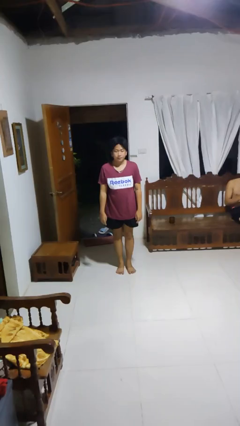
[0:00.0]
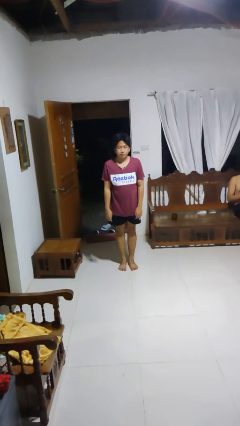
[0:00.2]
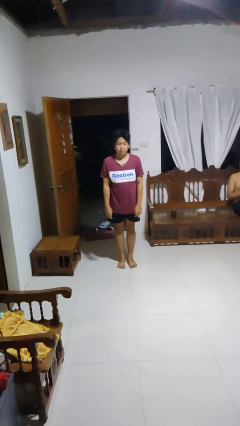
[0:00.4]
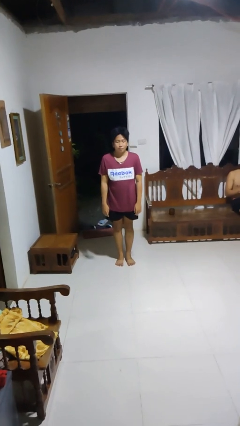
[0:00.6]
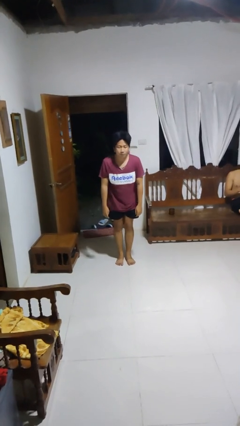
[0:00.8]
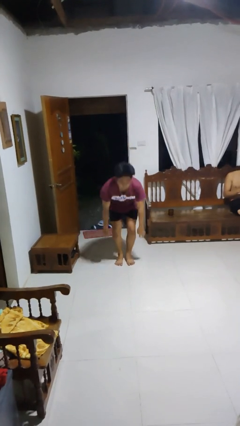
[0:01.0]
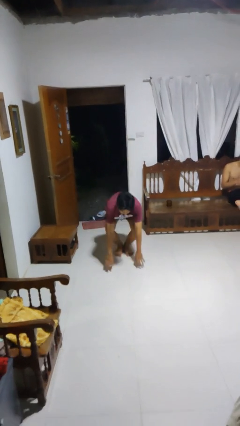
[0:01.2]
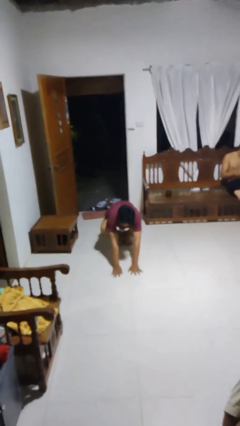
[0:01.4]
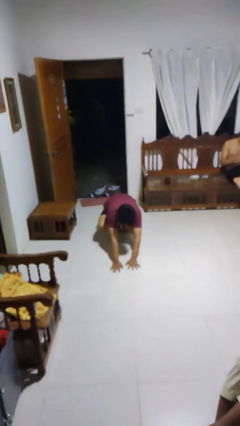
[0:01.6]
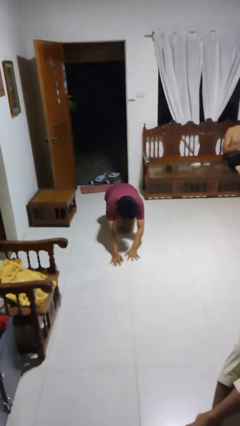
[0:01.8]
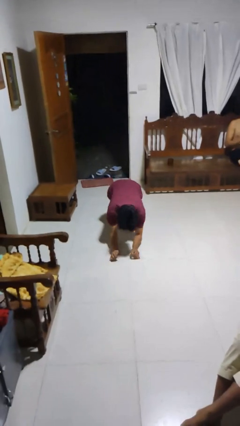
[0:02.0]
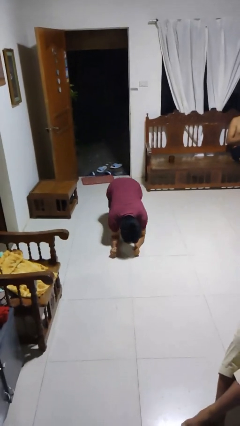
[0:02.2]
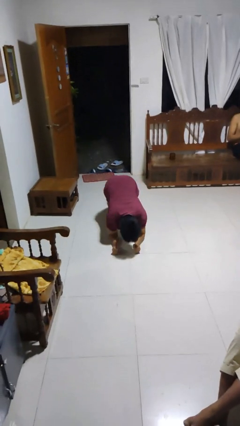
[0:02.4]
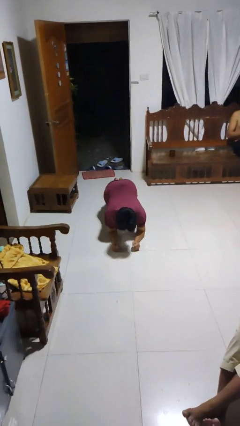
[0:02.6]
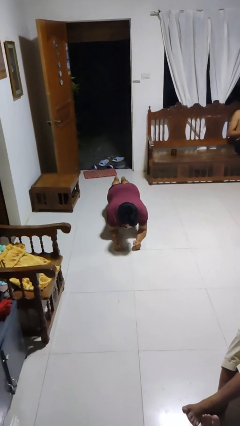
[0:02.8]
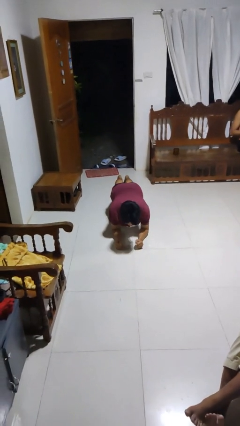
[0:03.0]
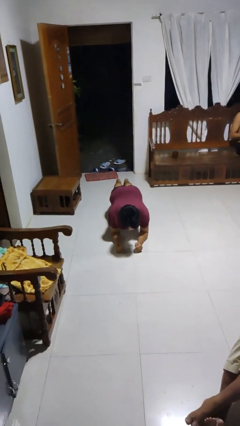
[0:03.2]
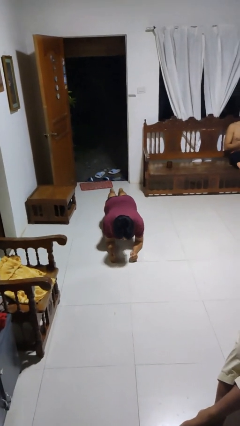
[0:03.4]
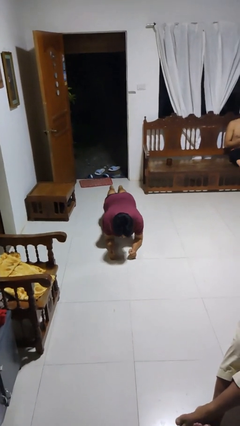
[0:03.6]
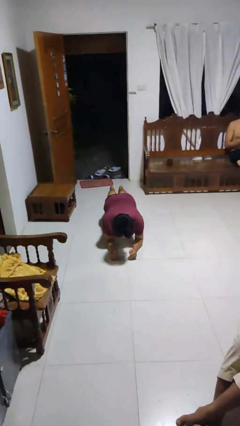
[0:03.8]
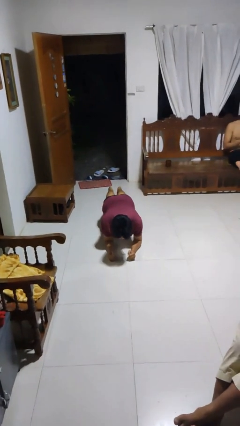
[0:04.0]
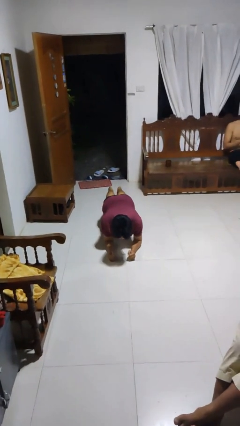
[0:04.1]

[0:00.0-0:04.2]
person exercises with plank

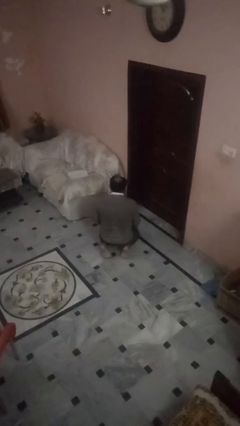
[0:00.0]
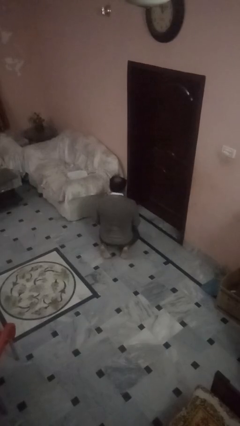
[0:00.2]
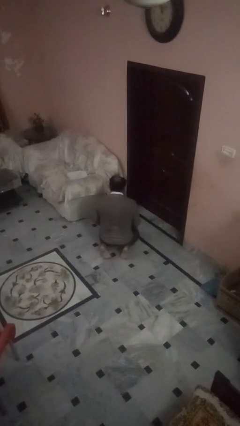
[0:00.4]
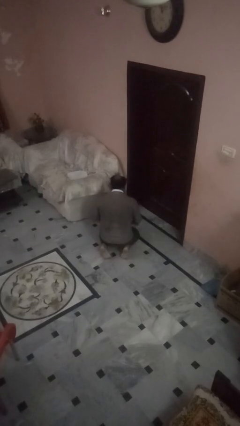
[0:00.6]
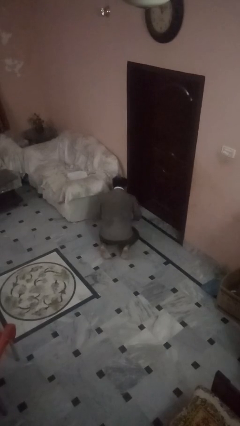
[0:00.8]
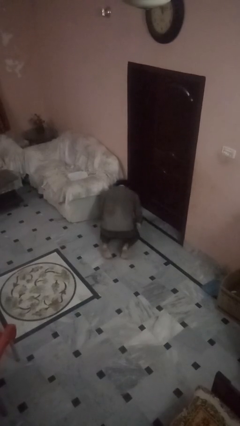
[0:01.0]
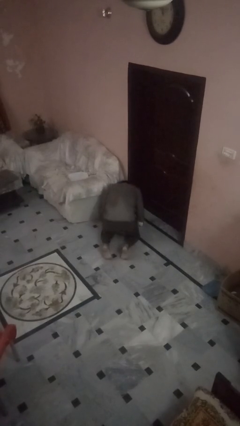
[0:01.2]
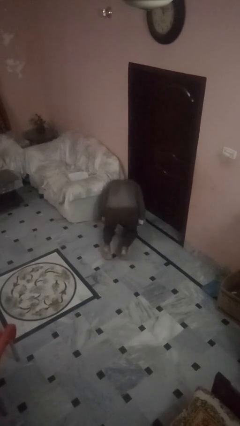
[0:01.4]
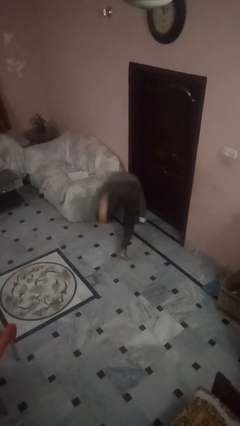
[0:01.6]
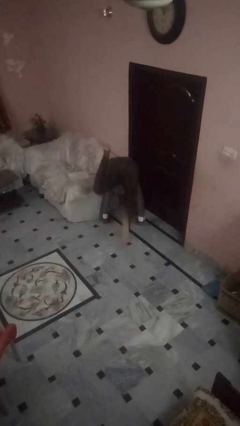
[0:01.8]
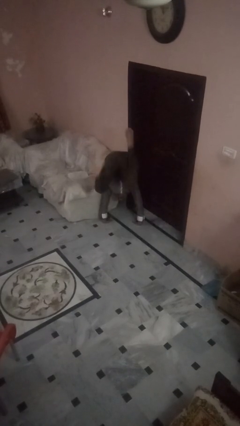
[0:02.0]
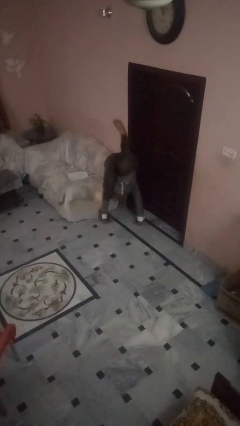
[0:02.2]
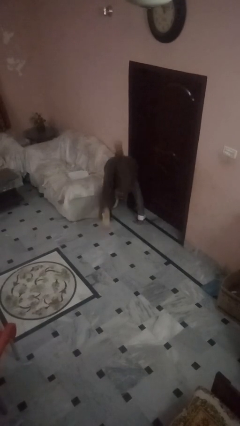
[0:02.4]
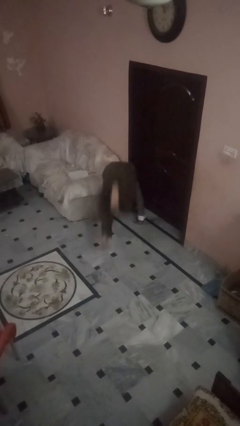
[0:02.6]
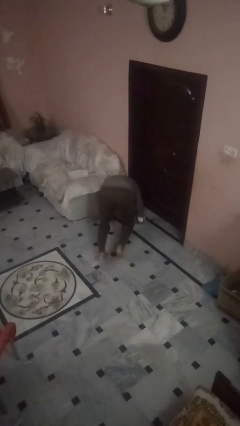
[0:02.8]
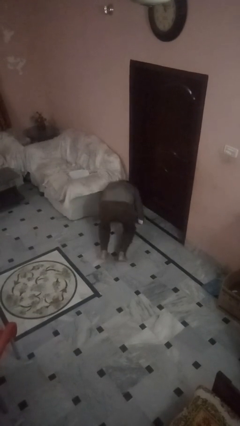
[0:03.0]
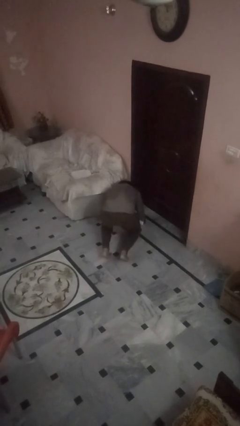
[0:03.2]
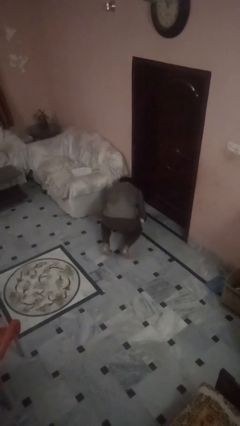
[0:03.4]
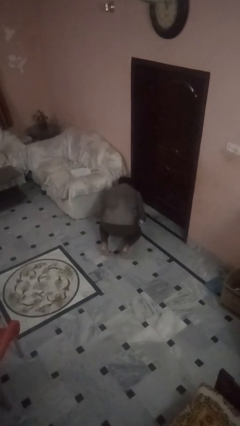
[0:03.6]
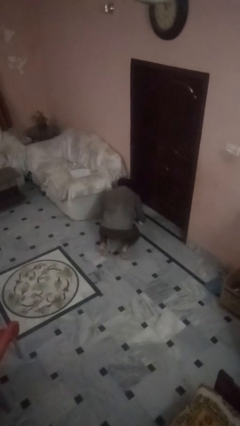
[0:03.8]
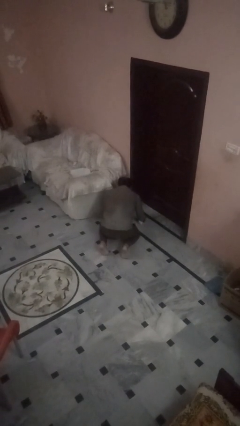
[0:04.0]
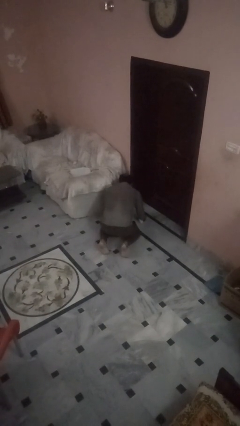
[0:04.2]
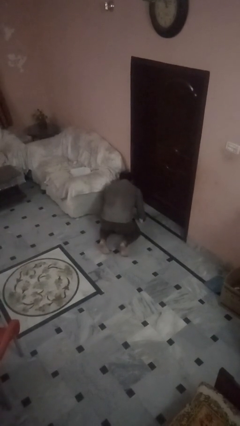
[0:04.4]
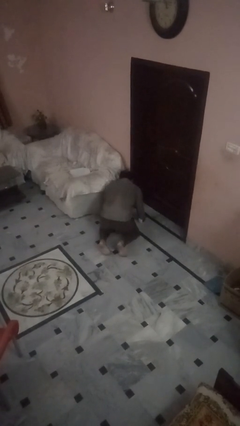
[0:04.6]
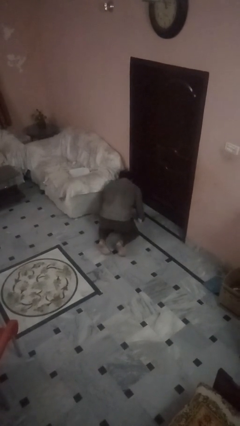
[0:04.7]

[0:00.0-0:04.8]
person somersaults

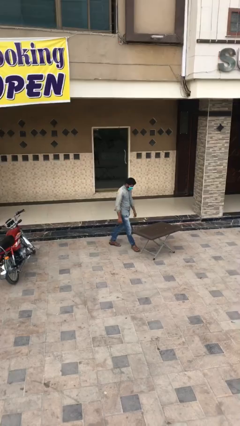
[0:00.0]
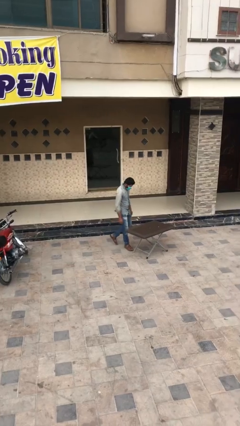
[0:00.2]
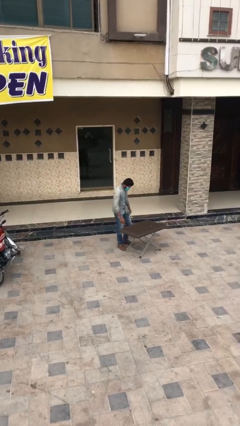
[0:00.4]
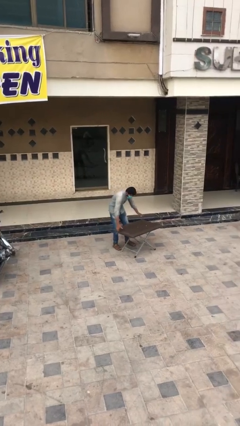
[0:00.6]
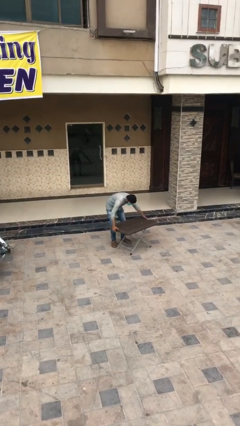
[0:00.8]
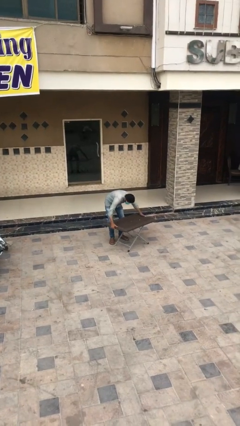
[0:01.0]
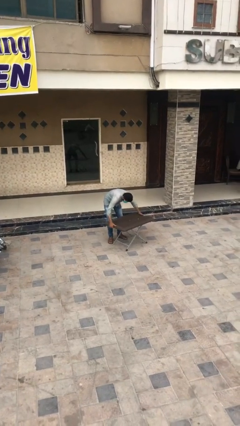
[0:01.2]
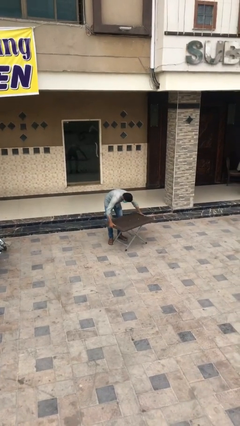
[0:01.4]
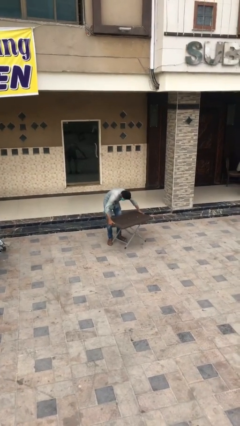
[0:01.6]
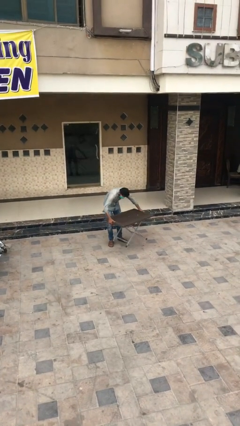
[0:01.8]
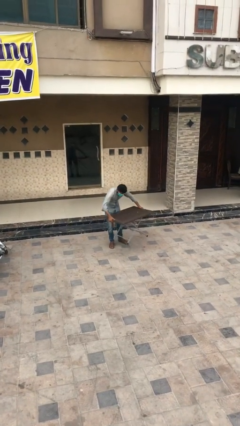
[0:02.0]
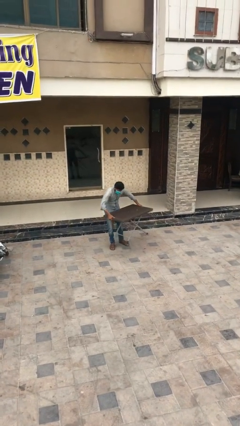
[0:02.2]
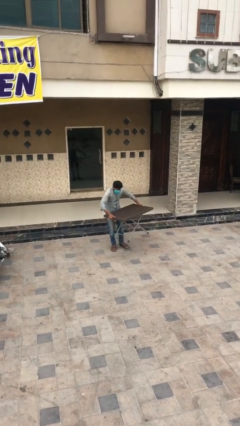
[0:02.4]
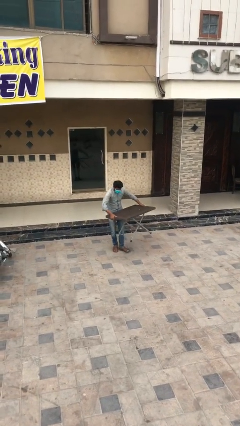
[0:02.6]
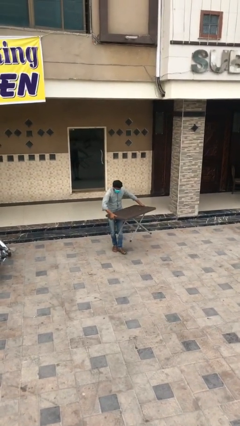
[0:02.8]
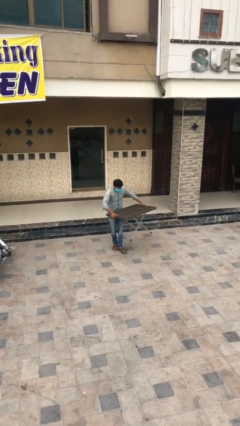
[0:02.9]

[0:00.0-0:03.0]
person picks up object from floor

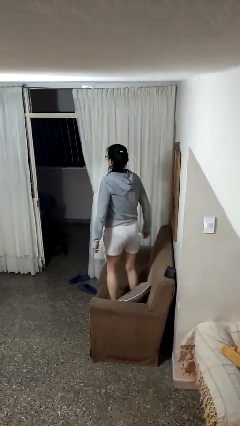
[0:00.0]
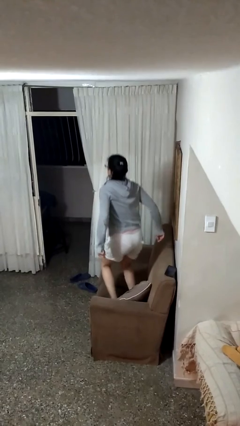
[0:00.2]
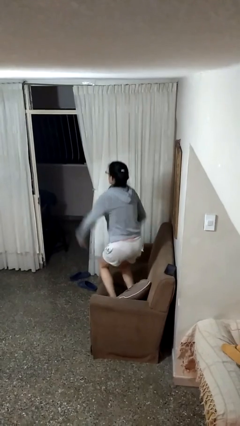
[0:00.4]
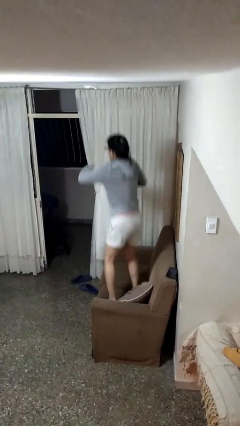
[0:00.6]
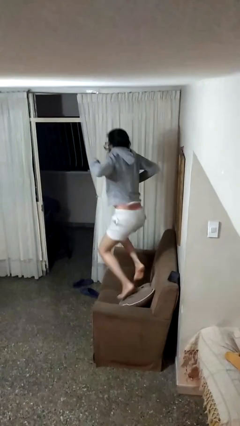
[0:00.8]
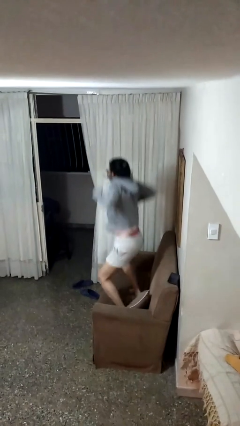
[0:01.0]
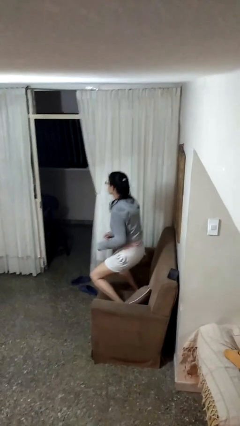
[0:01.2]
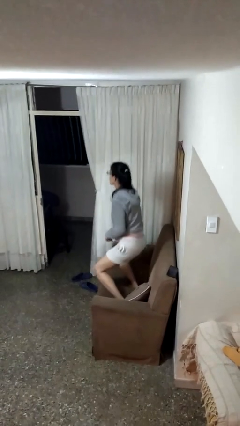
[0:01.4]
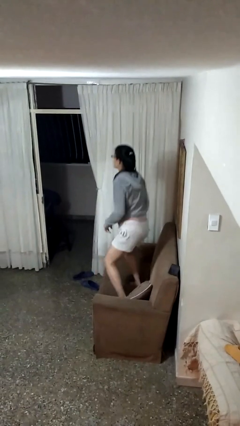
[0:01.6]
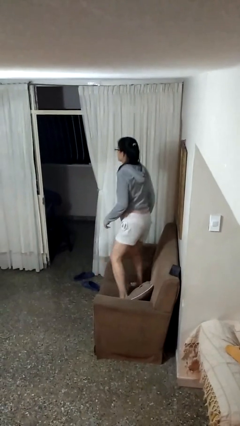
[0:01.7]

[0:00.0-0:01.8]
person jumps on couch

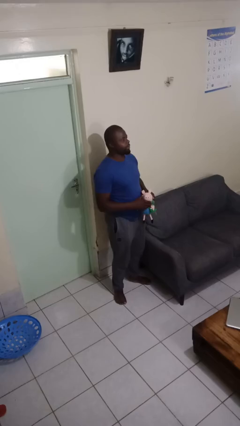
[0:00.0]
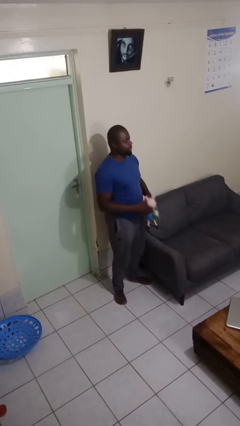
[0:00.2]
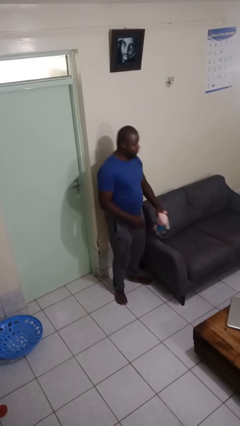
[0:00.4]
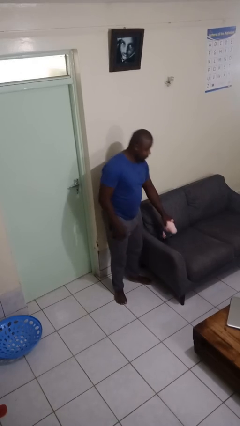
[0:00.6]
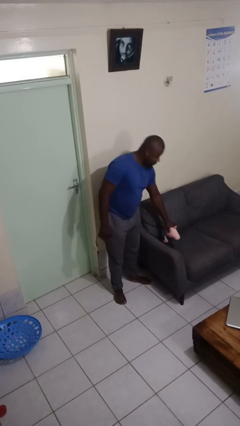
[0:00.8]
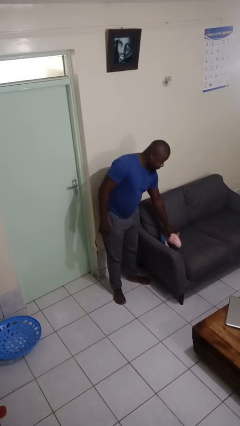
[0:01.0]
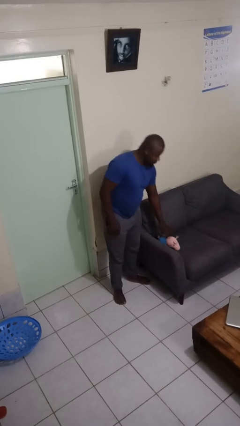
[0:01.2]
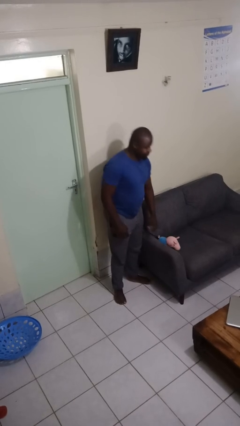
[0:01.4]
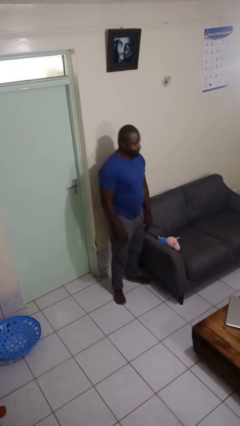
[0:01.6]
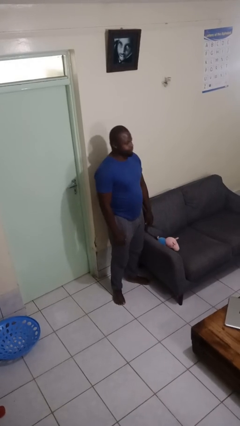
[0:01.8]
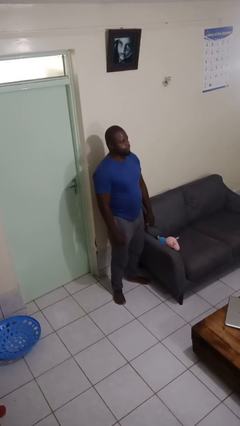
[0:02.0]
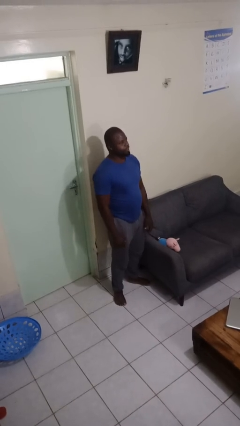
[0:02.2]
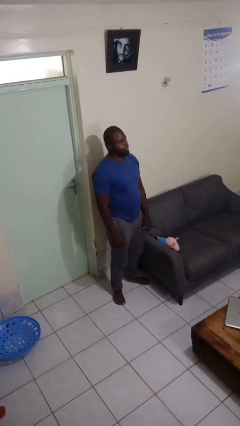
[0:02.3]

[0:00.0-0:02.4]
person puts down object on couch

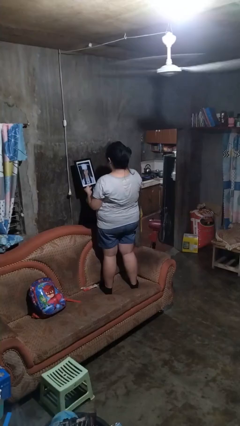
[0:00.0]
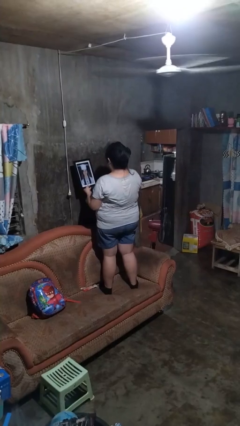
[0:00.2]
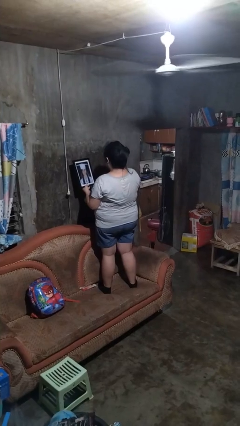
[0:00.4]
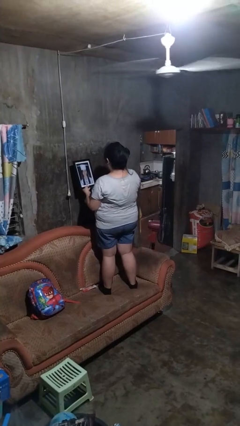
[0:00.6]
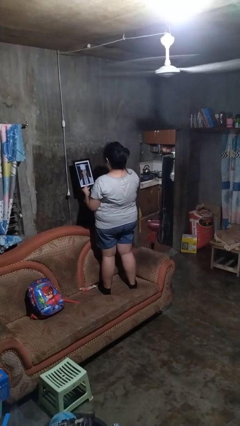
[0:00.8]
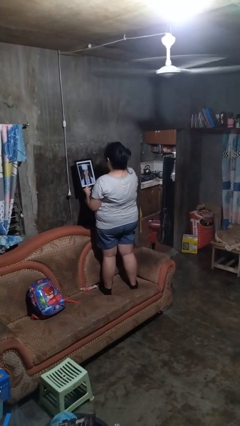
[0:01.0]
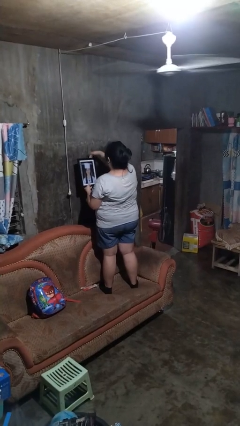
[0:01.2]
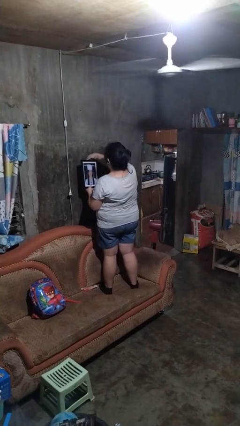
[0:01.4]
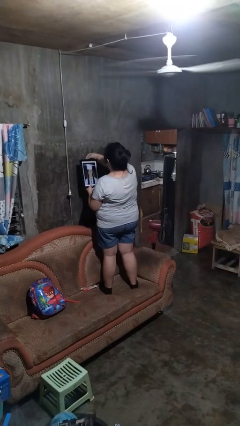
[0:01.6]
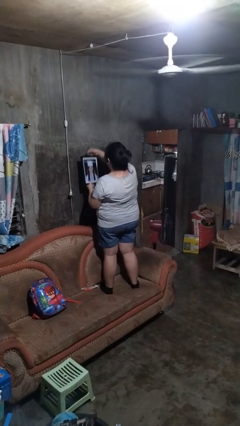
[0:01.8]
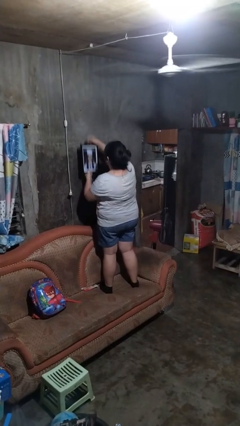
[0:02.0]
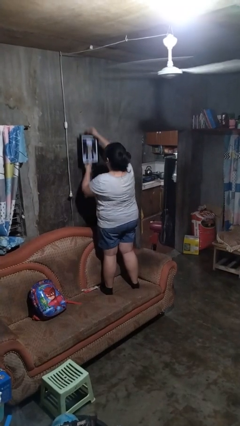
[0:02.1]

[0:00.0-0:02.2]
person puts up picture frame
